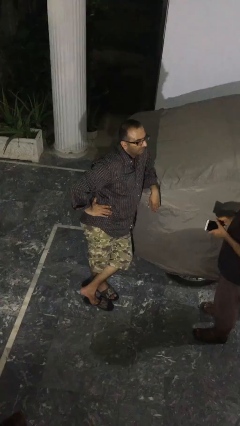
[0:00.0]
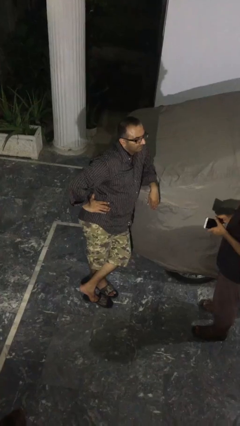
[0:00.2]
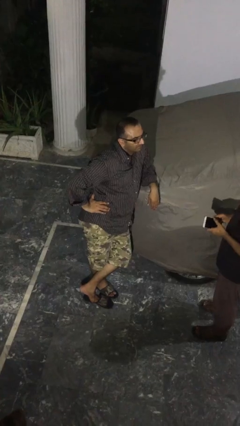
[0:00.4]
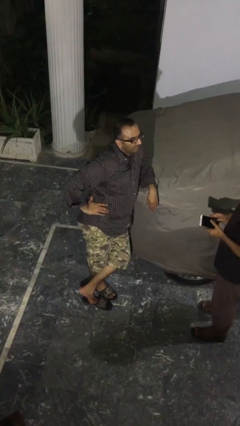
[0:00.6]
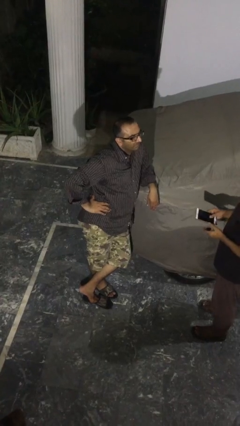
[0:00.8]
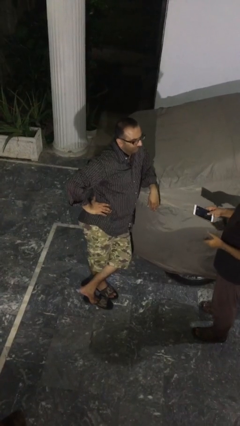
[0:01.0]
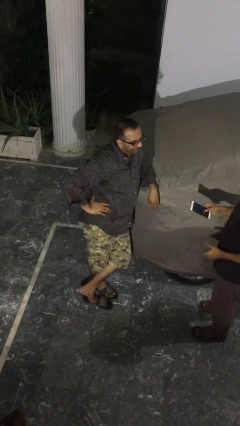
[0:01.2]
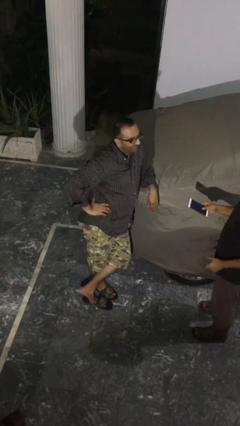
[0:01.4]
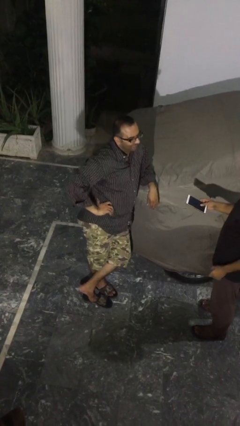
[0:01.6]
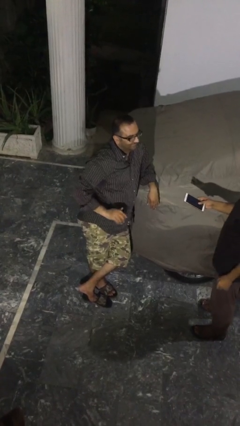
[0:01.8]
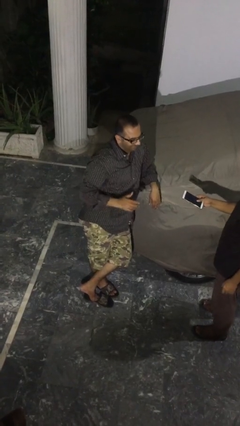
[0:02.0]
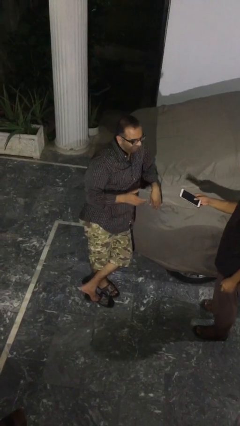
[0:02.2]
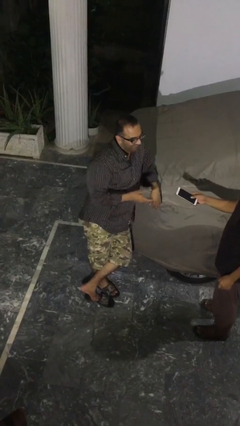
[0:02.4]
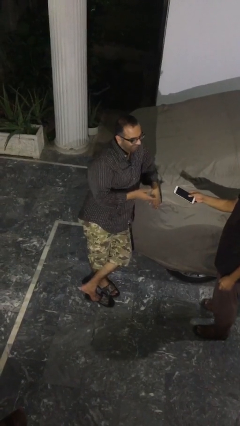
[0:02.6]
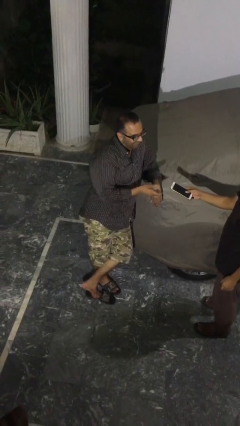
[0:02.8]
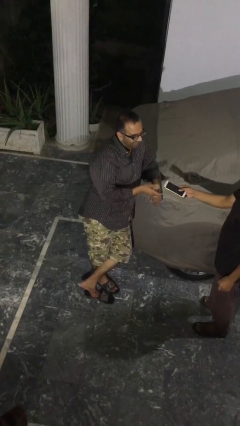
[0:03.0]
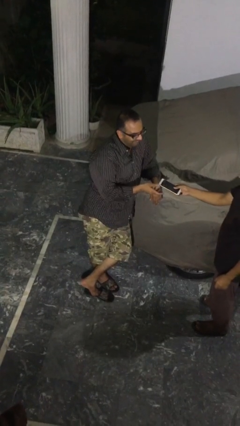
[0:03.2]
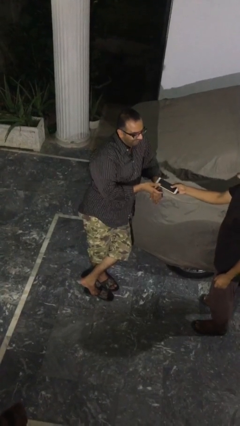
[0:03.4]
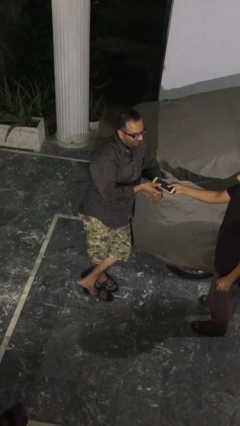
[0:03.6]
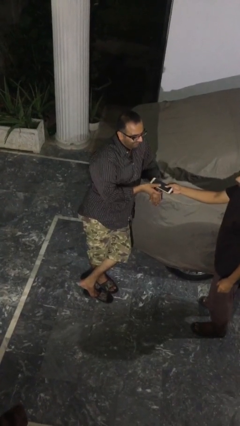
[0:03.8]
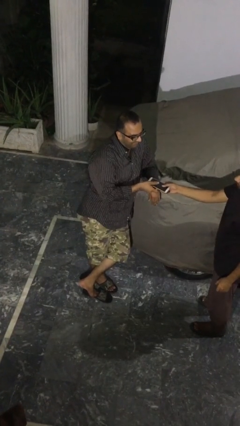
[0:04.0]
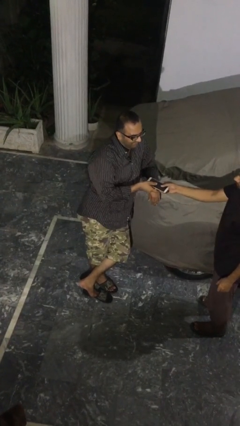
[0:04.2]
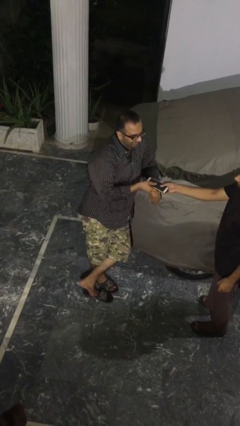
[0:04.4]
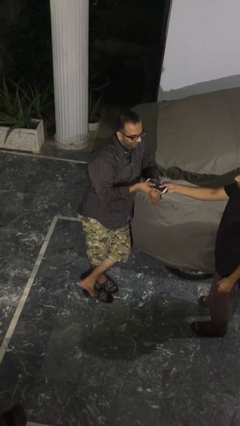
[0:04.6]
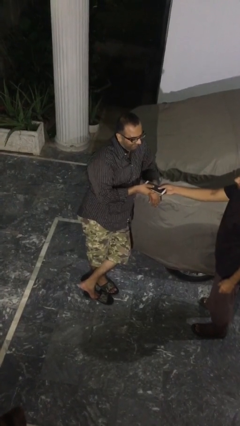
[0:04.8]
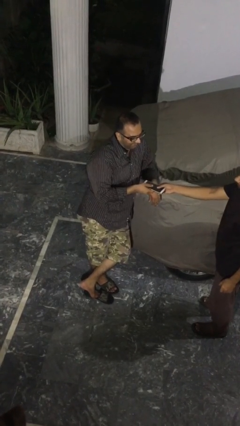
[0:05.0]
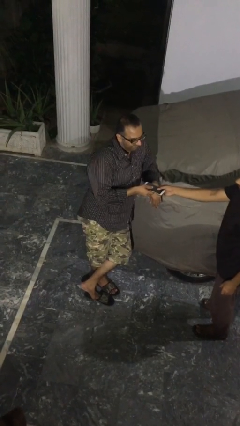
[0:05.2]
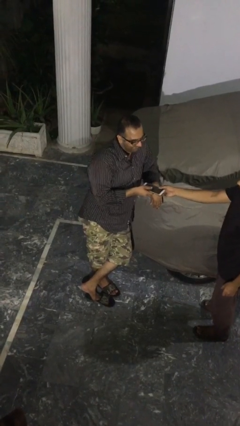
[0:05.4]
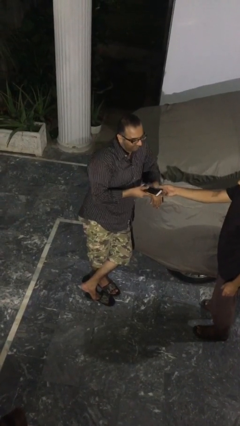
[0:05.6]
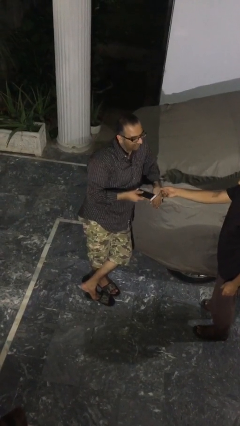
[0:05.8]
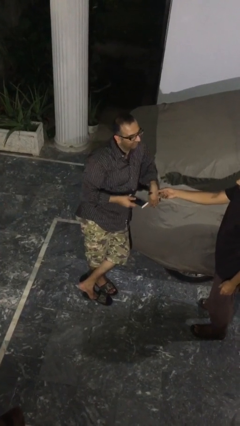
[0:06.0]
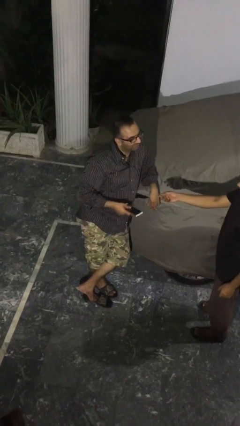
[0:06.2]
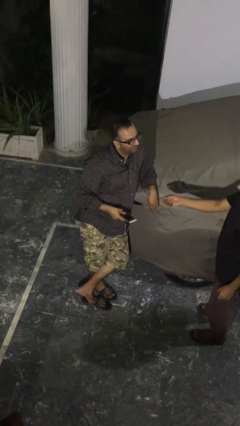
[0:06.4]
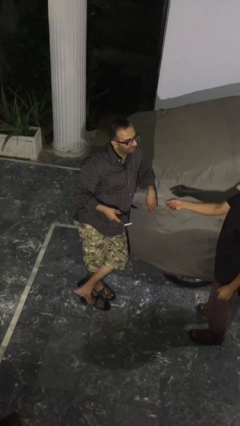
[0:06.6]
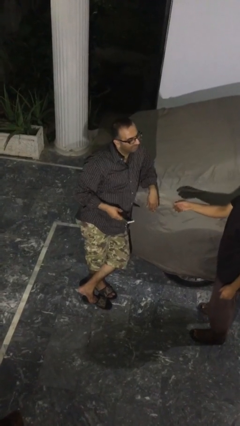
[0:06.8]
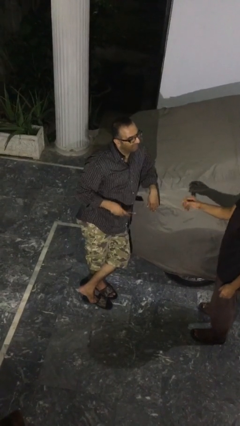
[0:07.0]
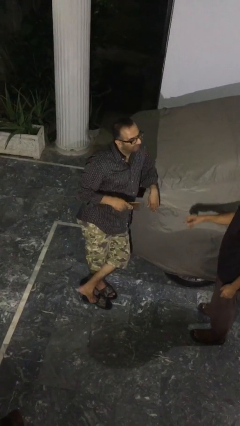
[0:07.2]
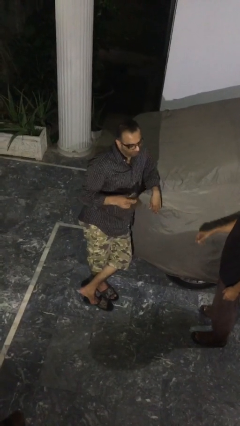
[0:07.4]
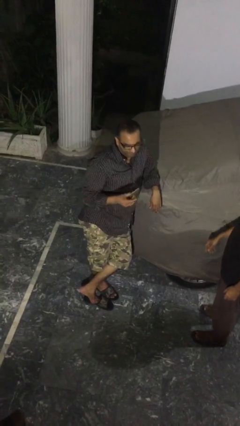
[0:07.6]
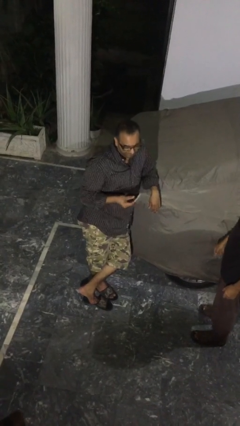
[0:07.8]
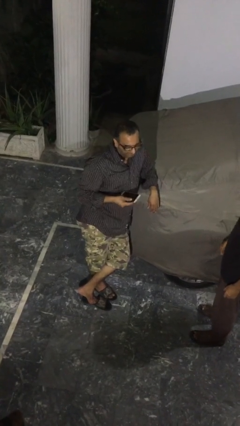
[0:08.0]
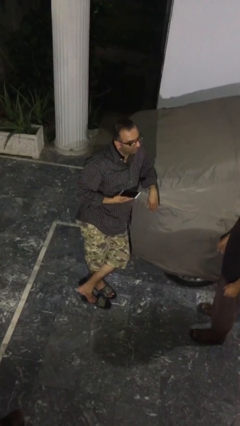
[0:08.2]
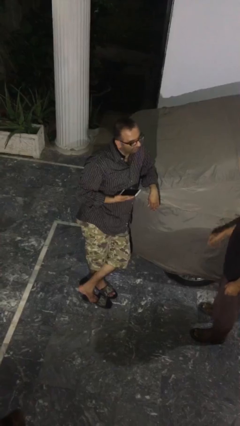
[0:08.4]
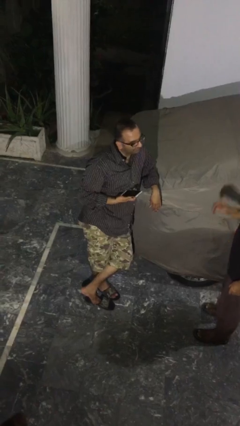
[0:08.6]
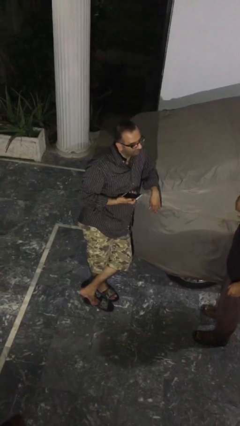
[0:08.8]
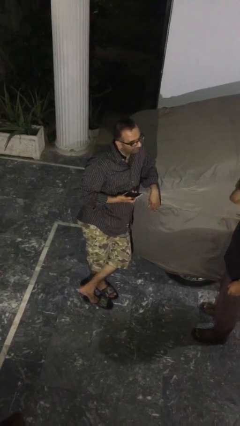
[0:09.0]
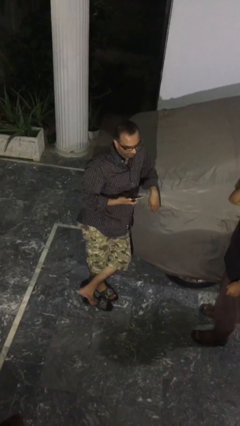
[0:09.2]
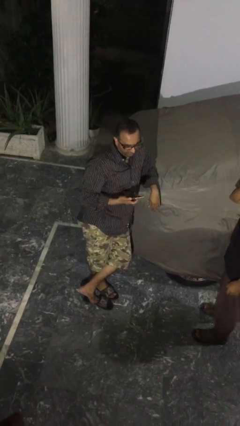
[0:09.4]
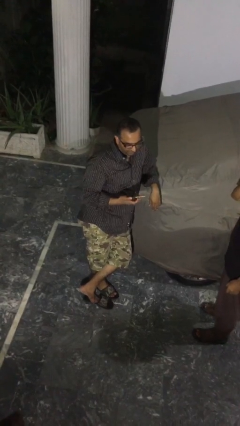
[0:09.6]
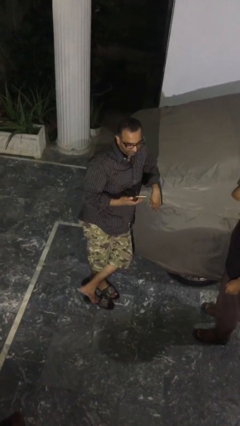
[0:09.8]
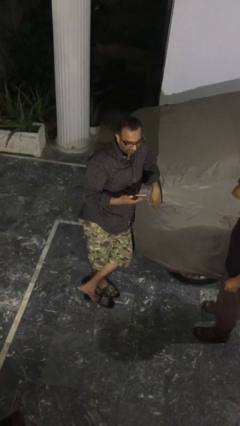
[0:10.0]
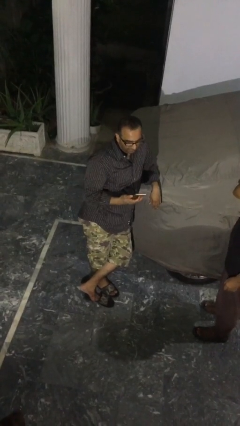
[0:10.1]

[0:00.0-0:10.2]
person transfers object to person

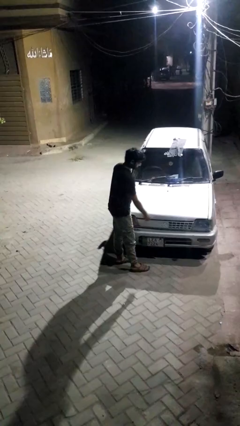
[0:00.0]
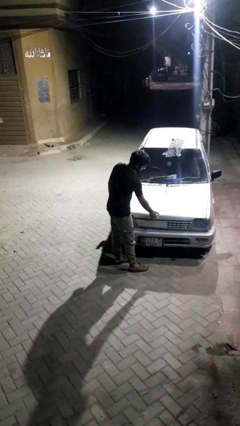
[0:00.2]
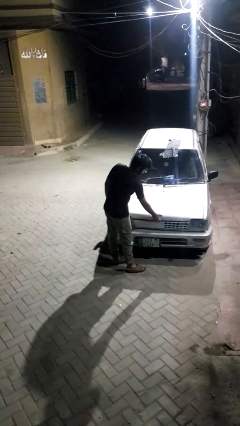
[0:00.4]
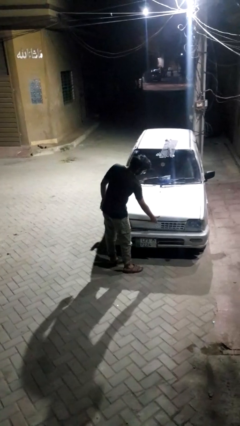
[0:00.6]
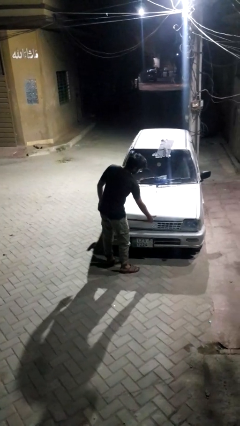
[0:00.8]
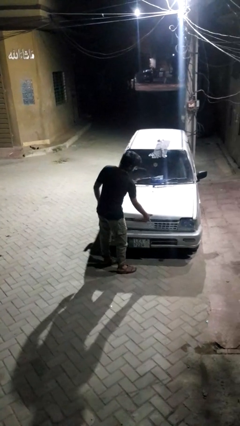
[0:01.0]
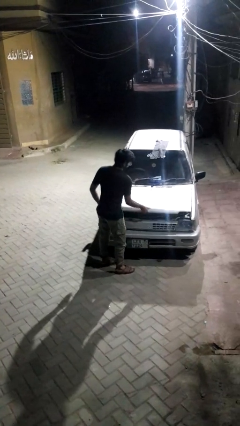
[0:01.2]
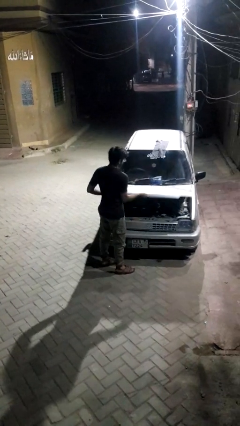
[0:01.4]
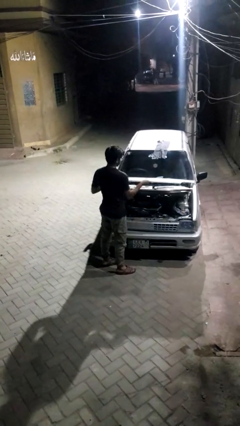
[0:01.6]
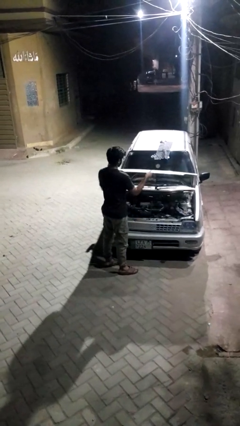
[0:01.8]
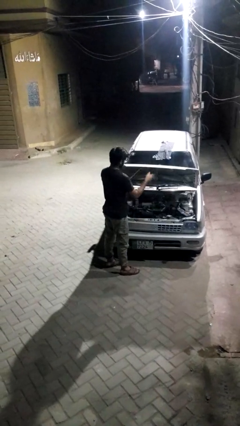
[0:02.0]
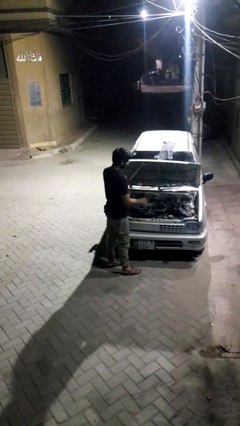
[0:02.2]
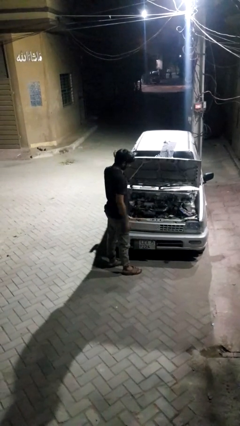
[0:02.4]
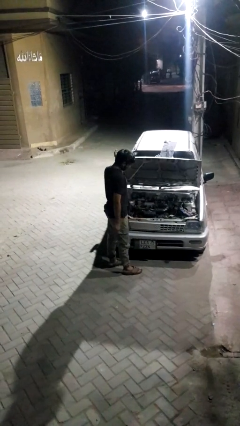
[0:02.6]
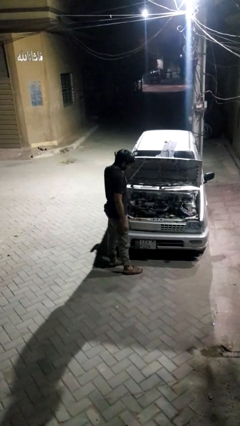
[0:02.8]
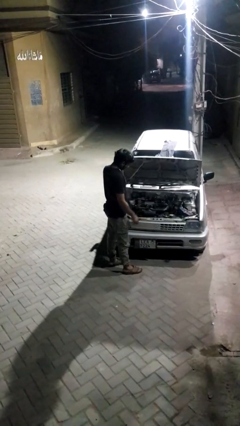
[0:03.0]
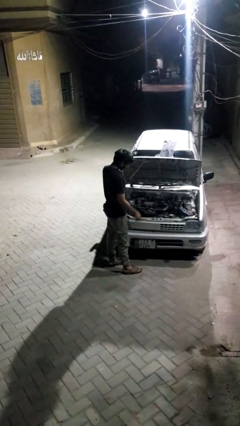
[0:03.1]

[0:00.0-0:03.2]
person opens car hood

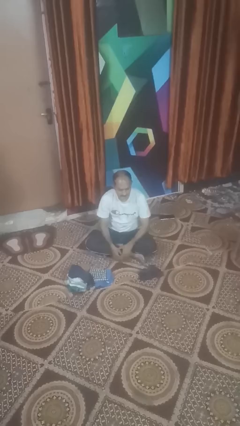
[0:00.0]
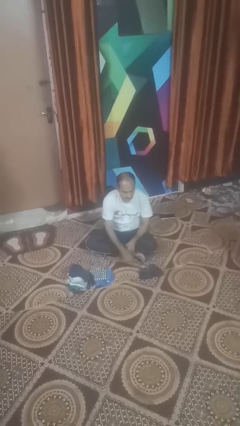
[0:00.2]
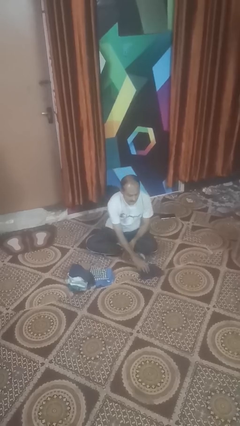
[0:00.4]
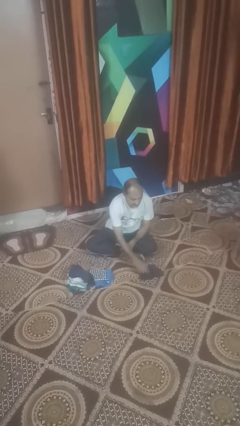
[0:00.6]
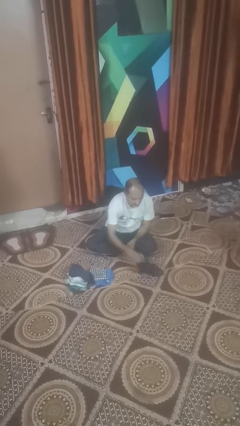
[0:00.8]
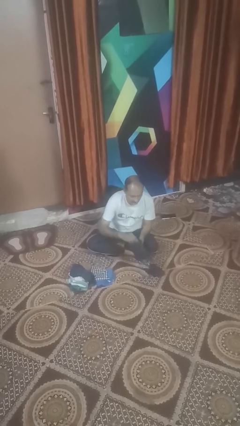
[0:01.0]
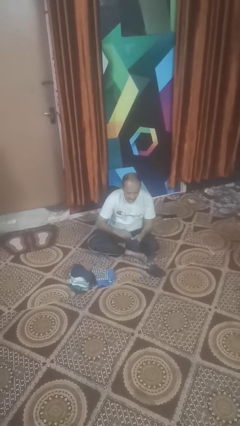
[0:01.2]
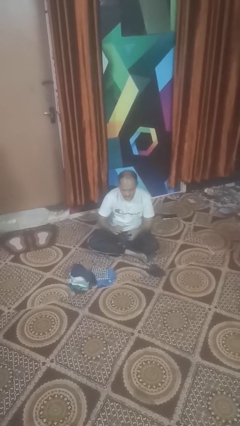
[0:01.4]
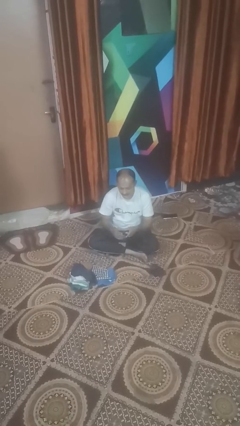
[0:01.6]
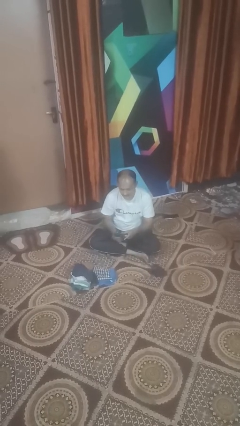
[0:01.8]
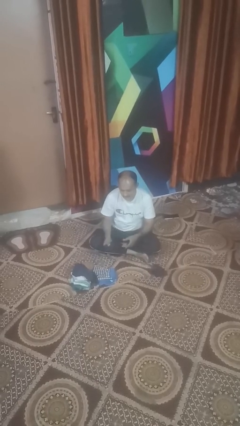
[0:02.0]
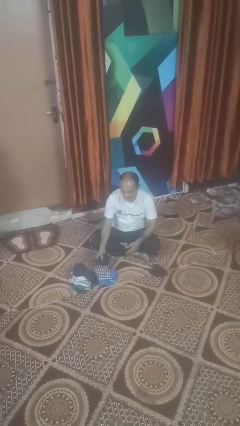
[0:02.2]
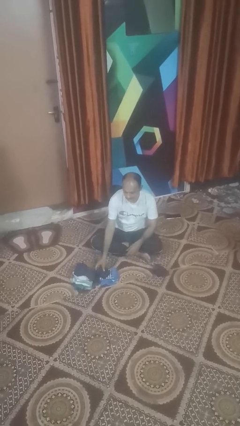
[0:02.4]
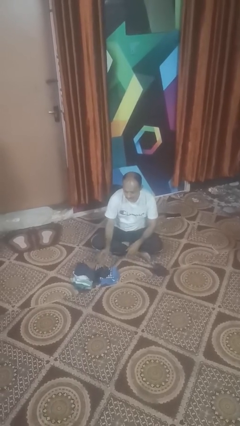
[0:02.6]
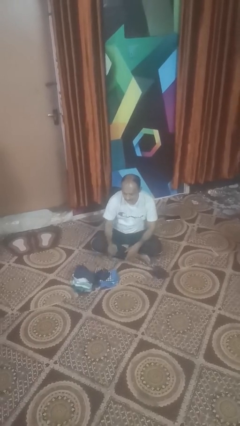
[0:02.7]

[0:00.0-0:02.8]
person folds socks

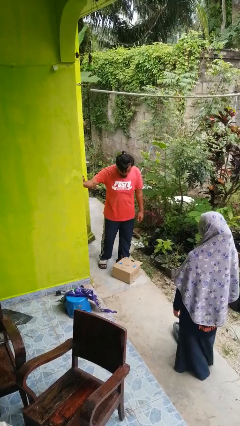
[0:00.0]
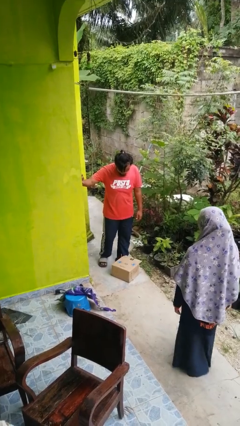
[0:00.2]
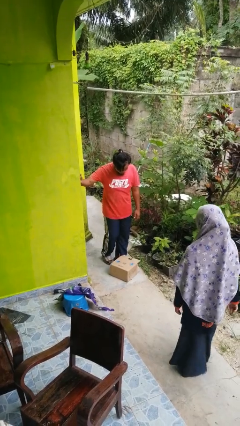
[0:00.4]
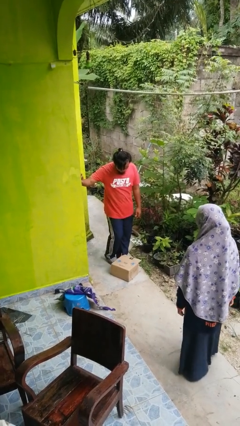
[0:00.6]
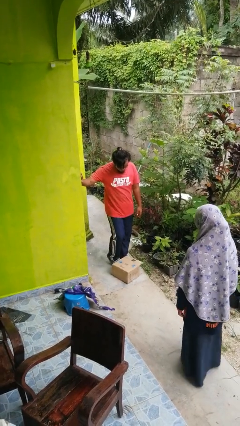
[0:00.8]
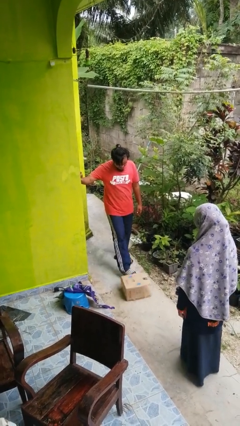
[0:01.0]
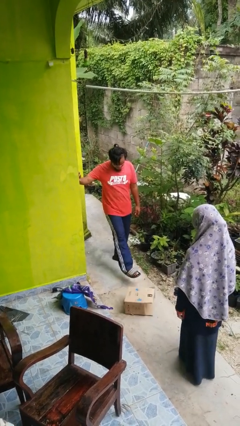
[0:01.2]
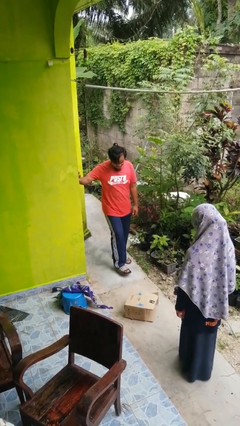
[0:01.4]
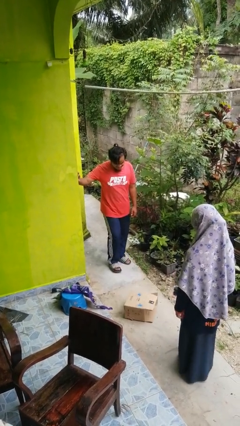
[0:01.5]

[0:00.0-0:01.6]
person kicks object to person
